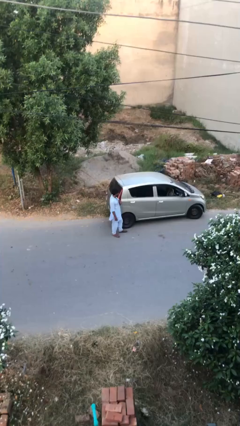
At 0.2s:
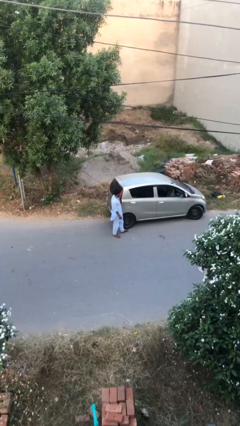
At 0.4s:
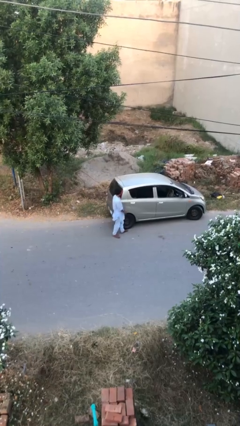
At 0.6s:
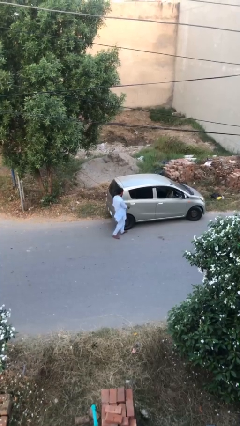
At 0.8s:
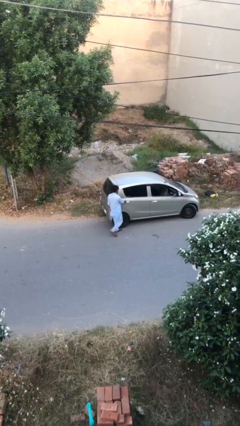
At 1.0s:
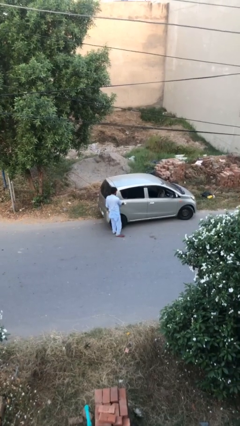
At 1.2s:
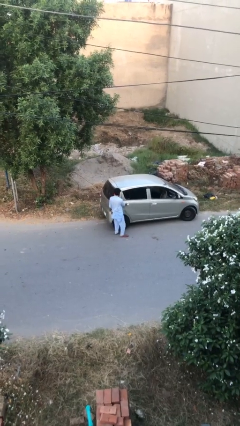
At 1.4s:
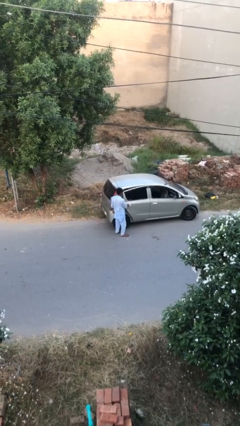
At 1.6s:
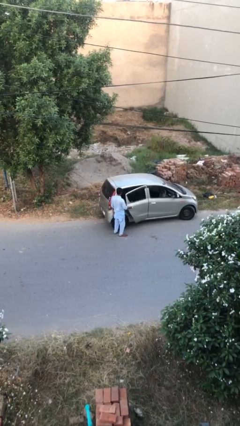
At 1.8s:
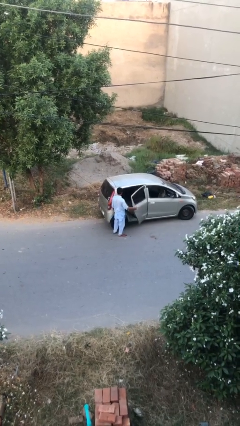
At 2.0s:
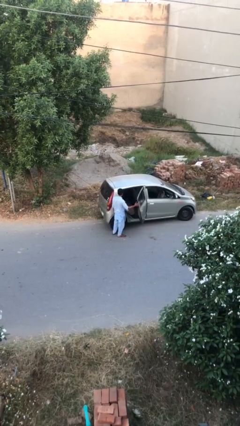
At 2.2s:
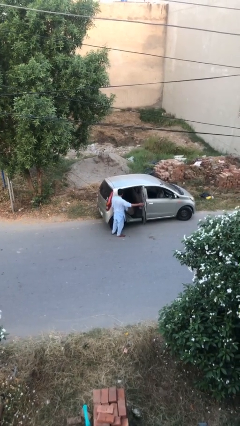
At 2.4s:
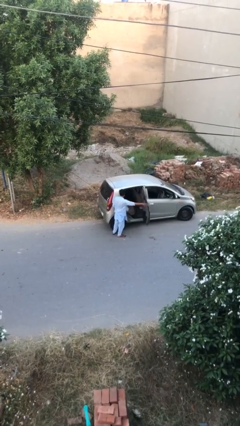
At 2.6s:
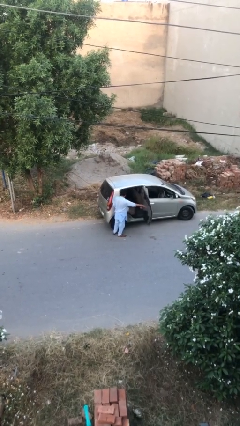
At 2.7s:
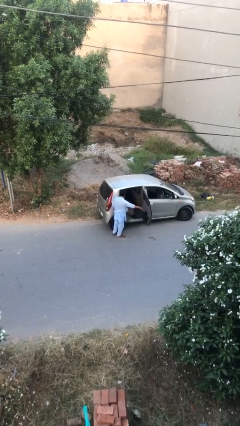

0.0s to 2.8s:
person opens car door

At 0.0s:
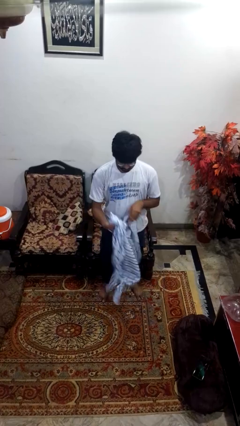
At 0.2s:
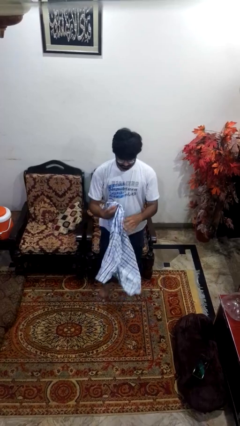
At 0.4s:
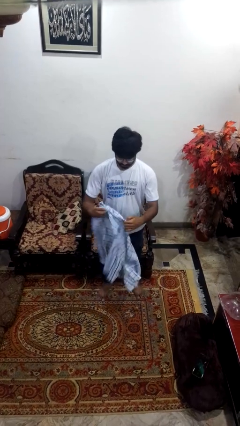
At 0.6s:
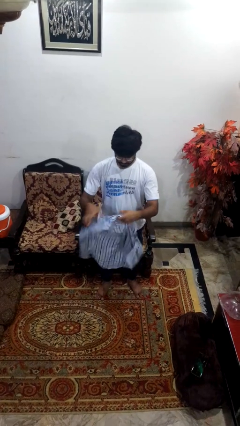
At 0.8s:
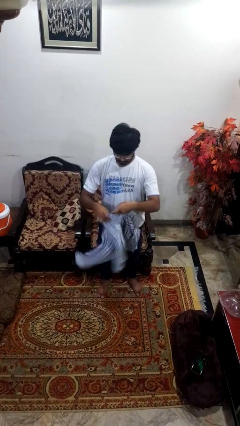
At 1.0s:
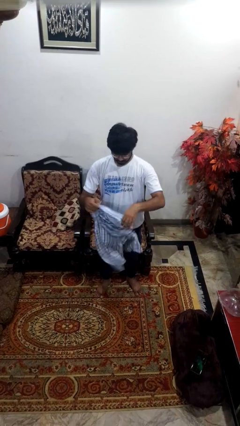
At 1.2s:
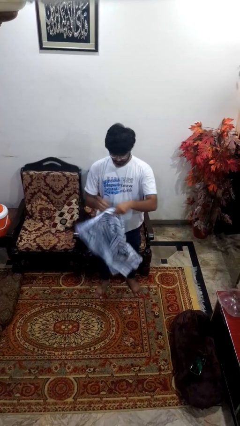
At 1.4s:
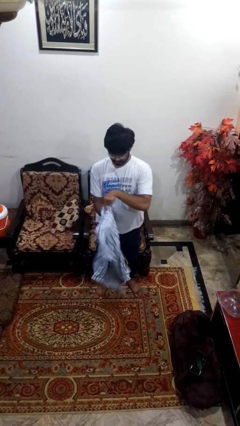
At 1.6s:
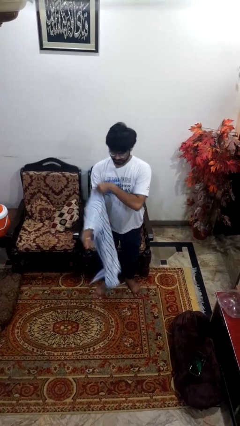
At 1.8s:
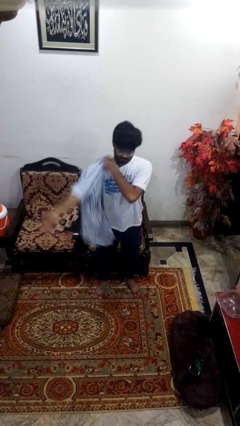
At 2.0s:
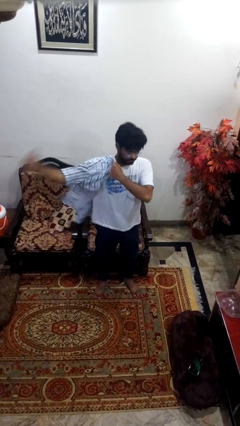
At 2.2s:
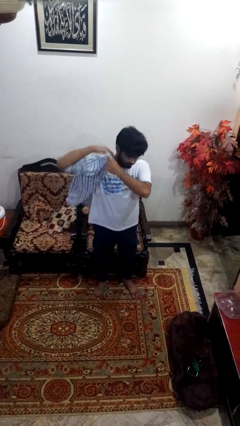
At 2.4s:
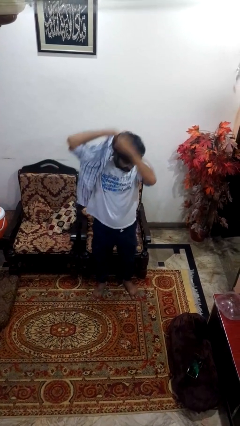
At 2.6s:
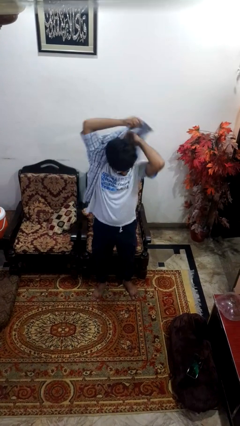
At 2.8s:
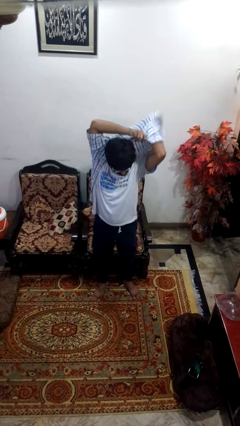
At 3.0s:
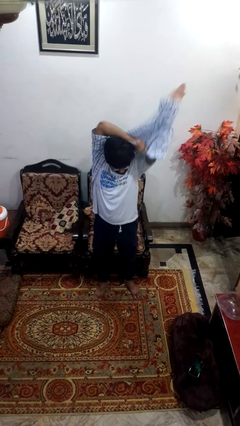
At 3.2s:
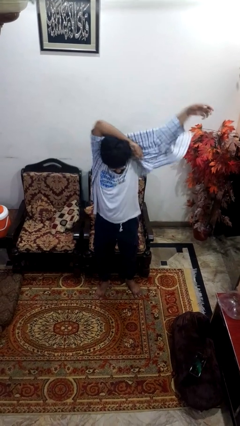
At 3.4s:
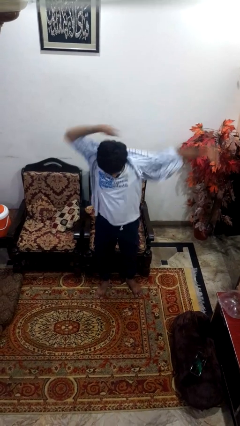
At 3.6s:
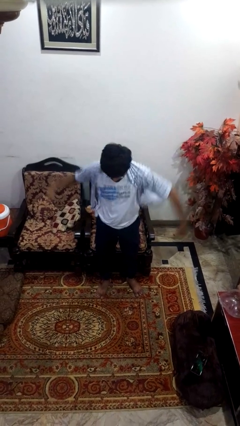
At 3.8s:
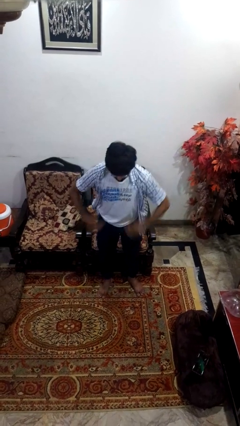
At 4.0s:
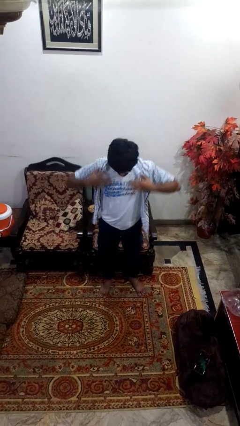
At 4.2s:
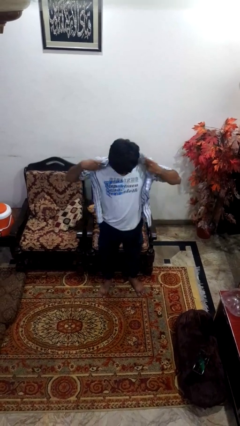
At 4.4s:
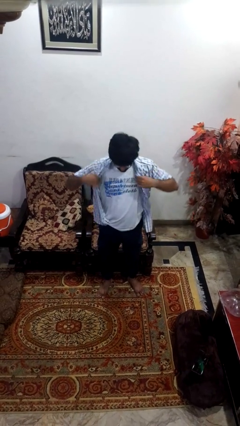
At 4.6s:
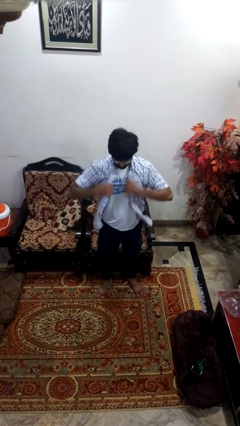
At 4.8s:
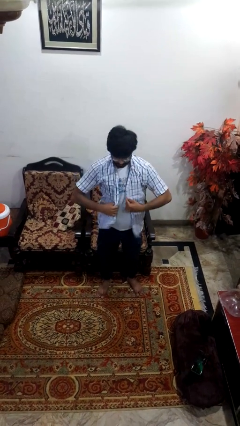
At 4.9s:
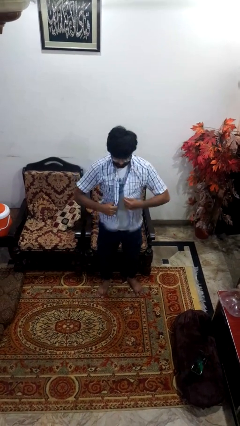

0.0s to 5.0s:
person puts on shirt

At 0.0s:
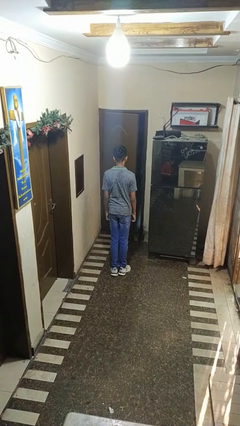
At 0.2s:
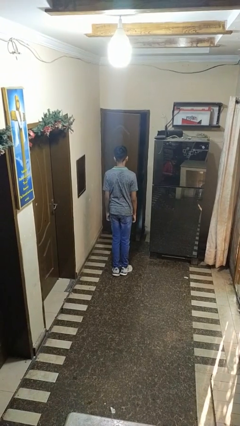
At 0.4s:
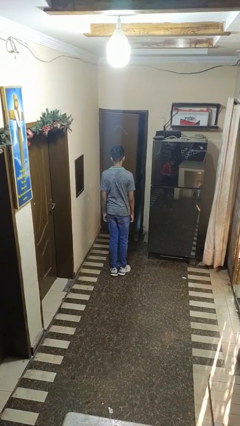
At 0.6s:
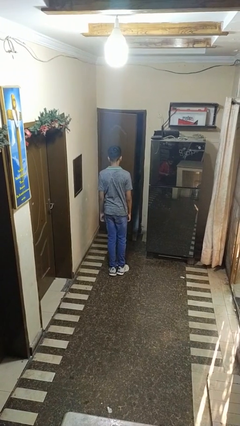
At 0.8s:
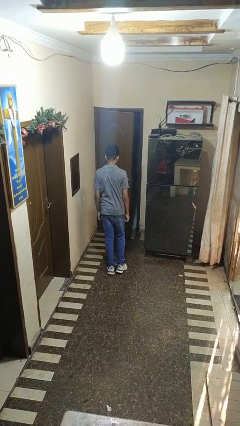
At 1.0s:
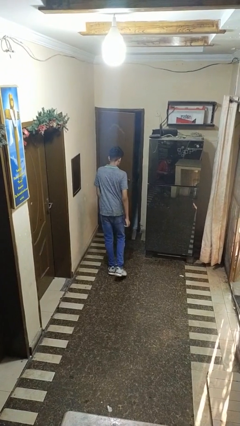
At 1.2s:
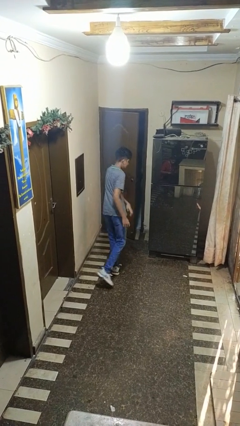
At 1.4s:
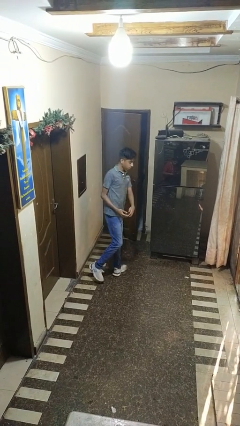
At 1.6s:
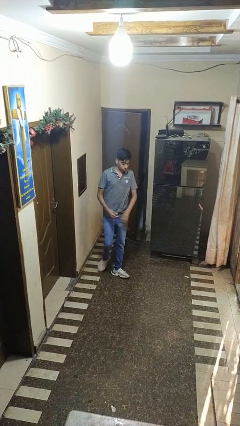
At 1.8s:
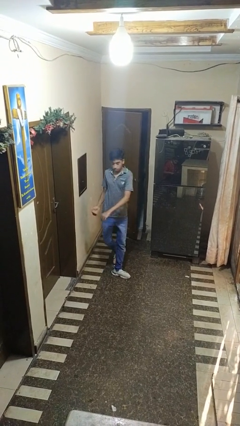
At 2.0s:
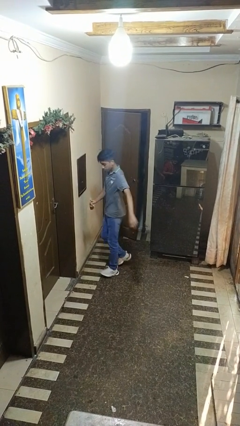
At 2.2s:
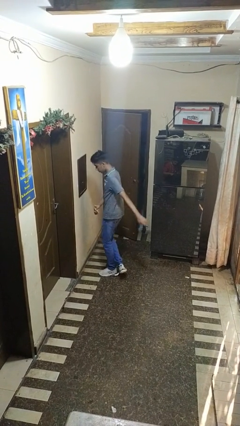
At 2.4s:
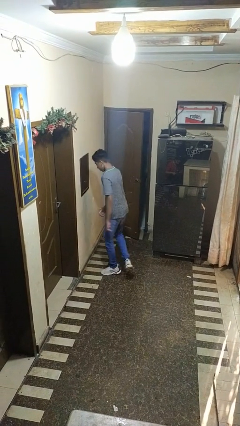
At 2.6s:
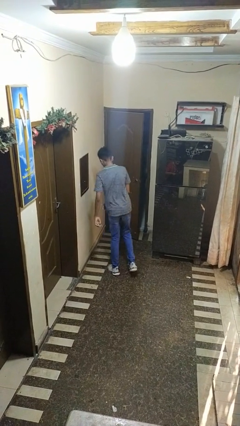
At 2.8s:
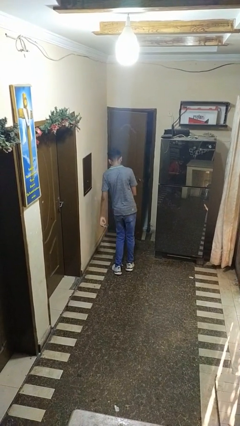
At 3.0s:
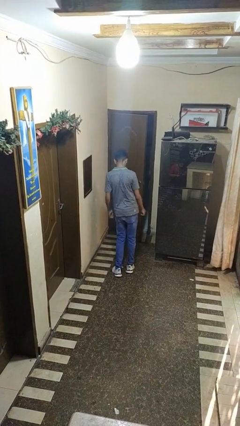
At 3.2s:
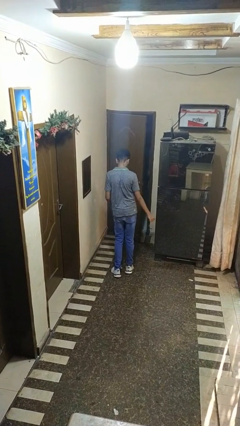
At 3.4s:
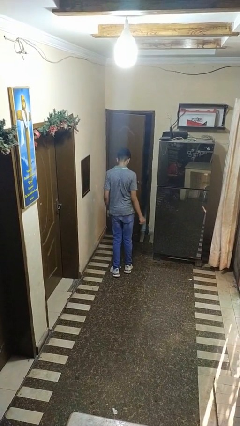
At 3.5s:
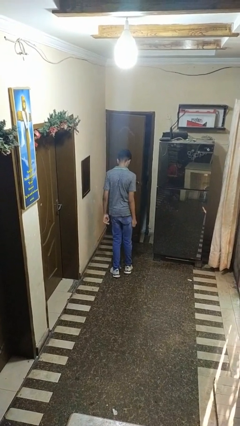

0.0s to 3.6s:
person twirls

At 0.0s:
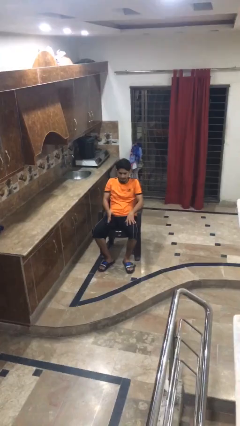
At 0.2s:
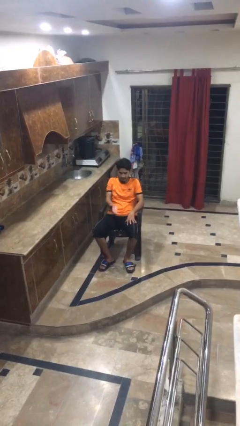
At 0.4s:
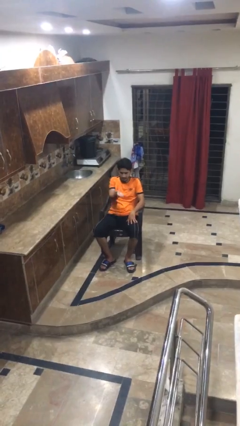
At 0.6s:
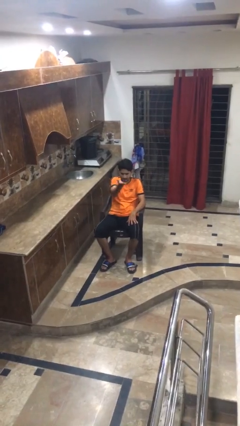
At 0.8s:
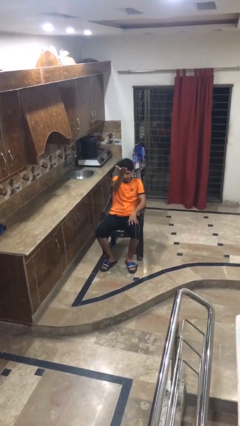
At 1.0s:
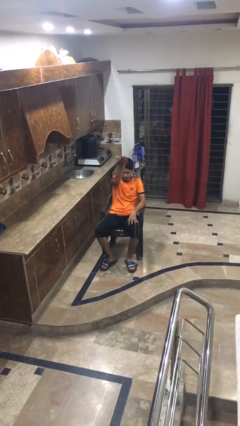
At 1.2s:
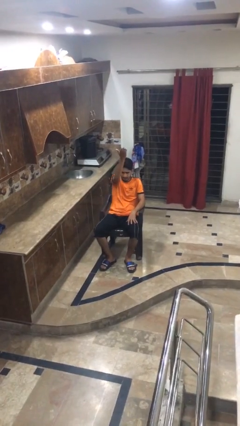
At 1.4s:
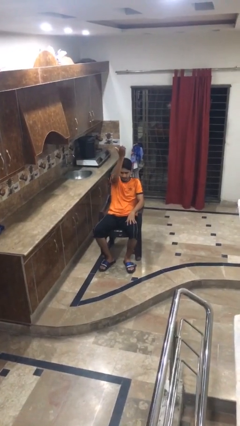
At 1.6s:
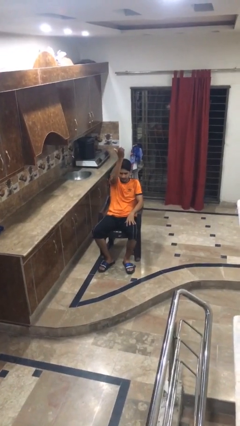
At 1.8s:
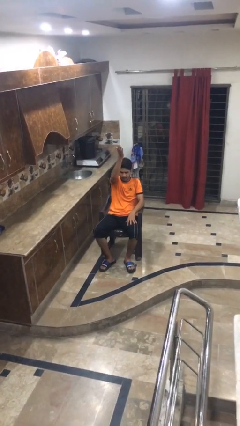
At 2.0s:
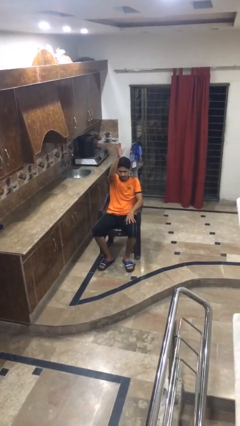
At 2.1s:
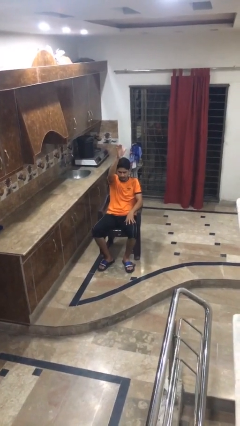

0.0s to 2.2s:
person gestures swipe up

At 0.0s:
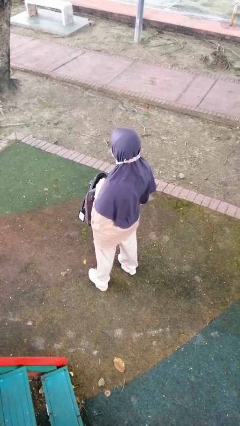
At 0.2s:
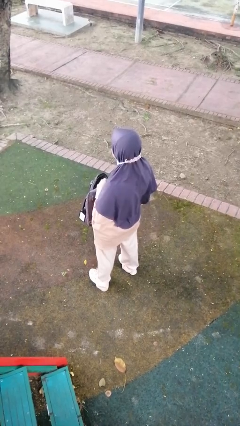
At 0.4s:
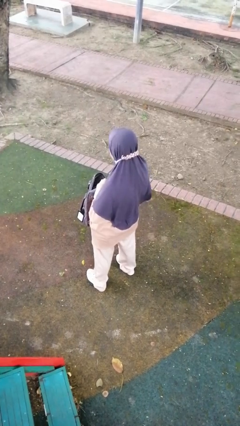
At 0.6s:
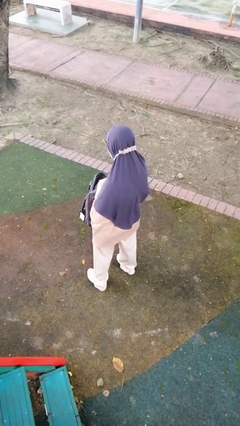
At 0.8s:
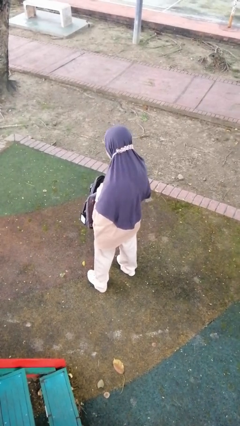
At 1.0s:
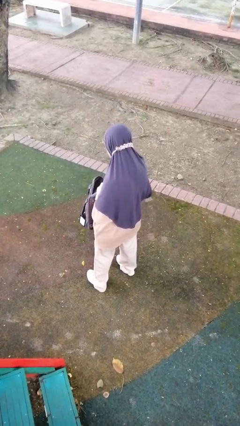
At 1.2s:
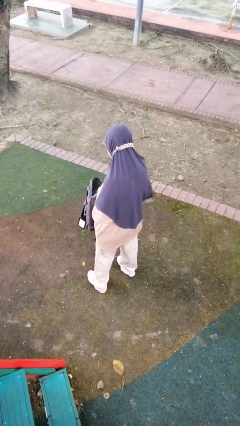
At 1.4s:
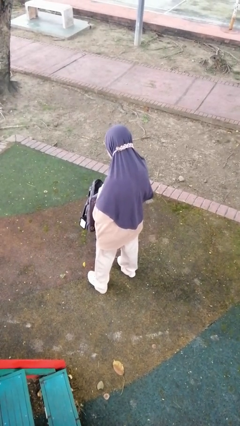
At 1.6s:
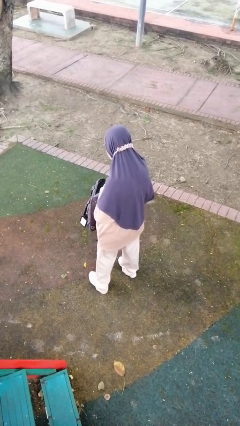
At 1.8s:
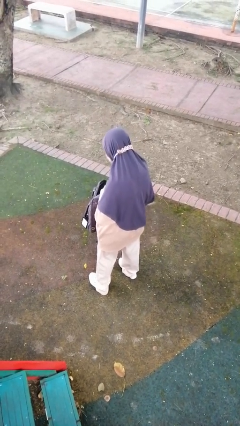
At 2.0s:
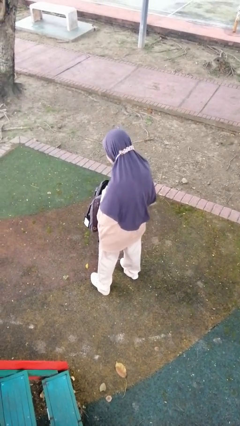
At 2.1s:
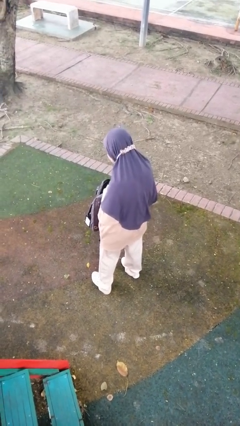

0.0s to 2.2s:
person searches in backpack

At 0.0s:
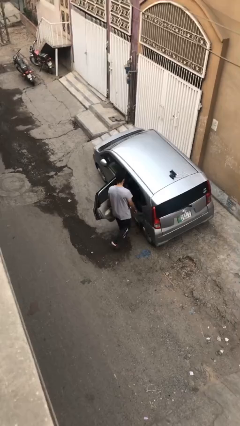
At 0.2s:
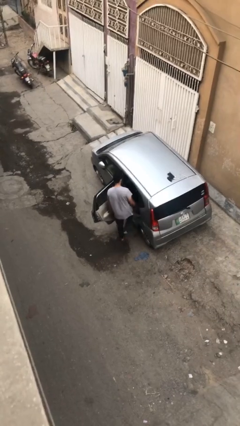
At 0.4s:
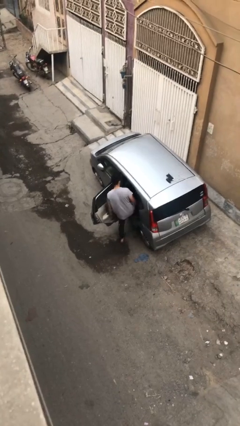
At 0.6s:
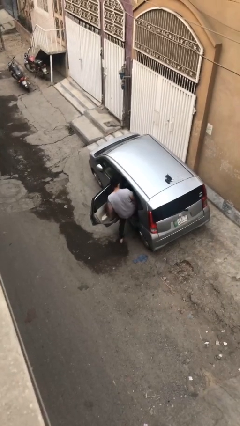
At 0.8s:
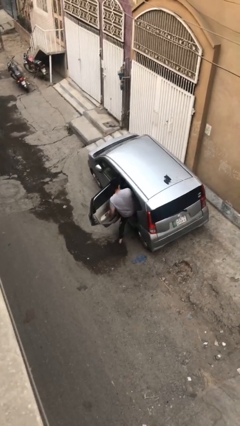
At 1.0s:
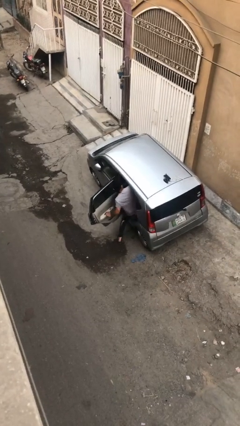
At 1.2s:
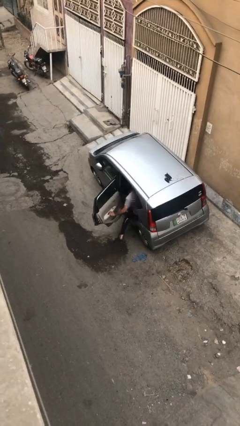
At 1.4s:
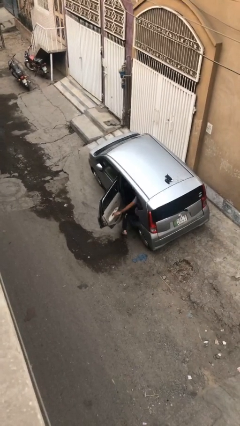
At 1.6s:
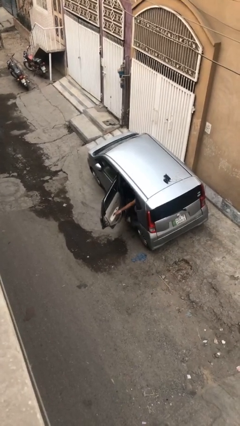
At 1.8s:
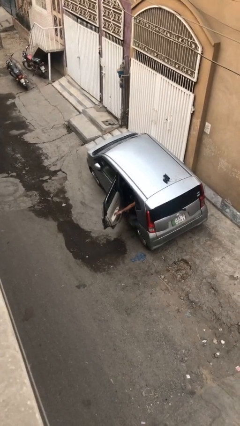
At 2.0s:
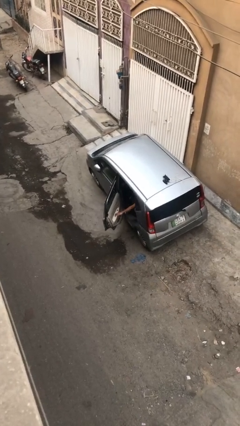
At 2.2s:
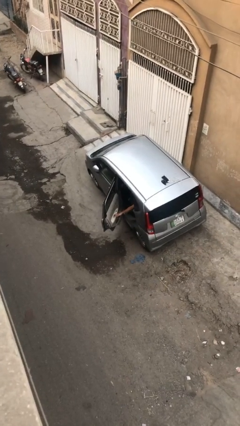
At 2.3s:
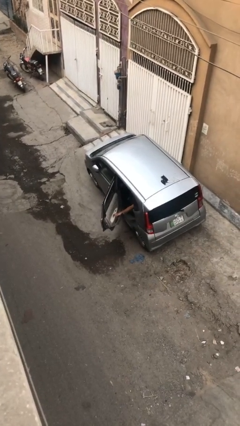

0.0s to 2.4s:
person enters car
